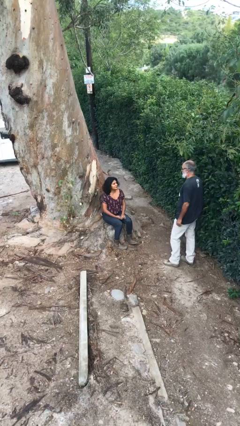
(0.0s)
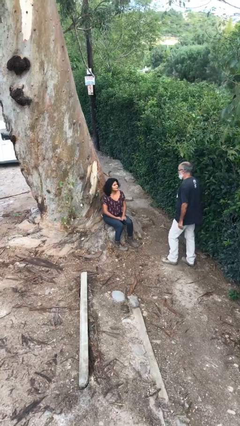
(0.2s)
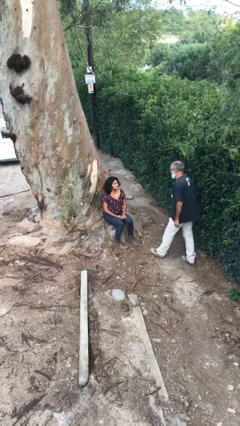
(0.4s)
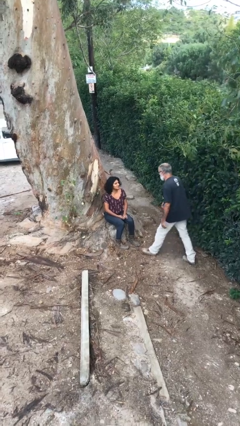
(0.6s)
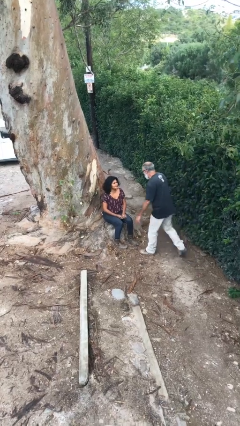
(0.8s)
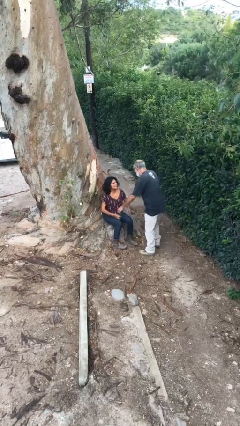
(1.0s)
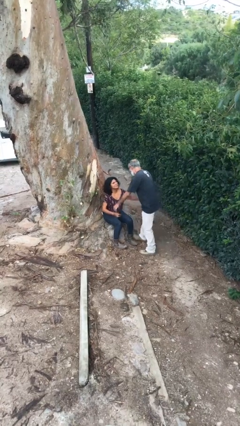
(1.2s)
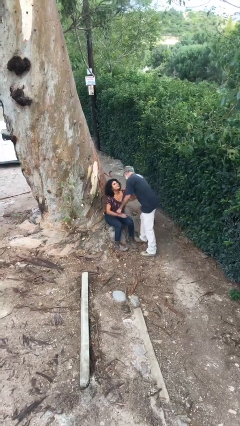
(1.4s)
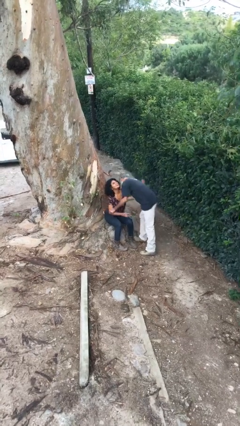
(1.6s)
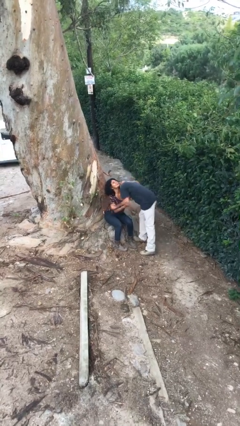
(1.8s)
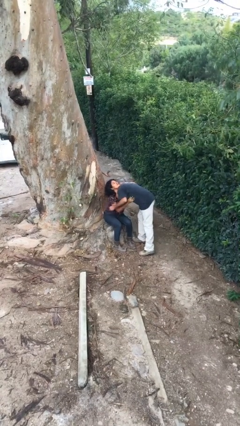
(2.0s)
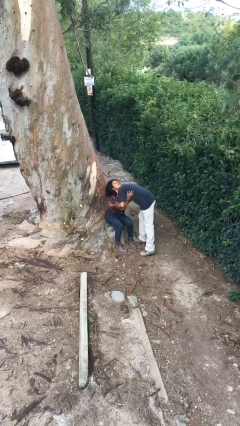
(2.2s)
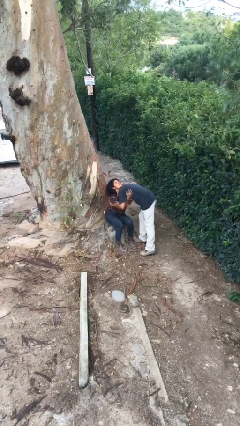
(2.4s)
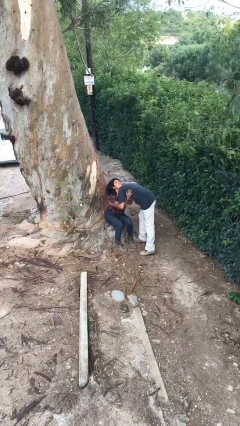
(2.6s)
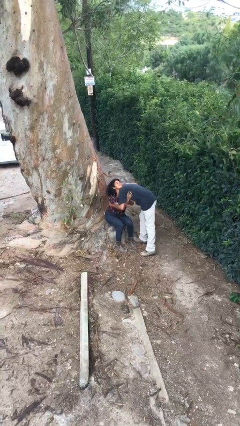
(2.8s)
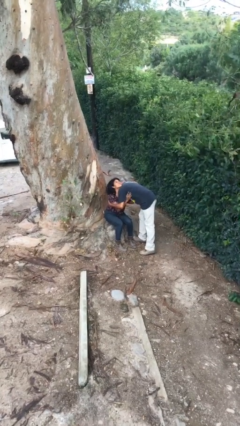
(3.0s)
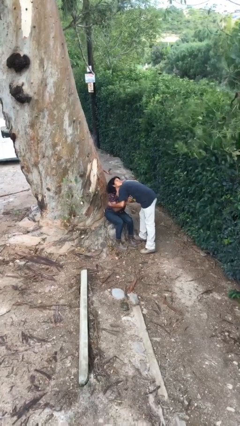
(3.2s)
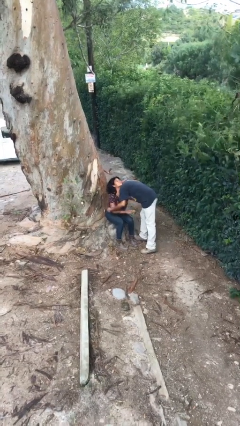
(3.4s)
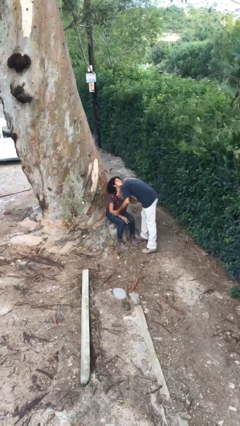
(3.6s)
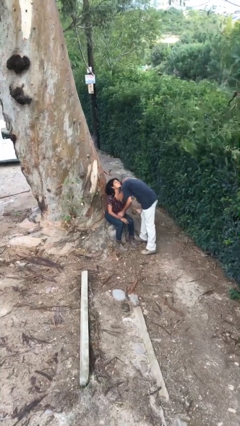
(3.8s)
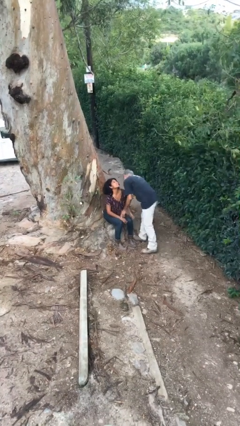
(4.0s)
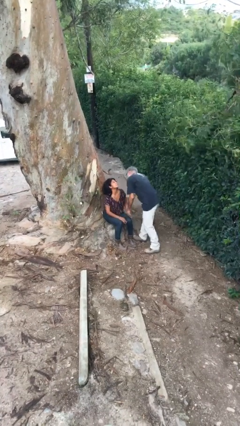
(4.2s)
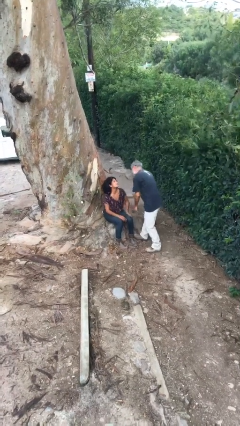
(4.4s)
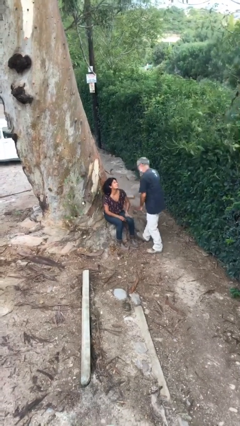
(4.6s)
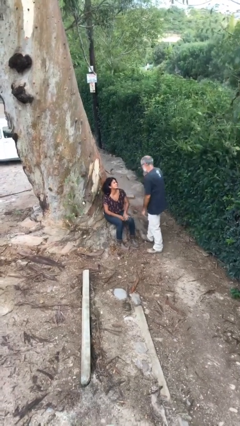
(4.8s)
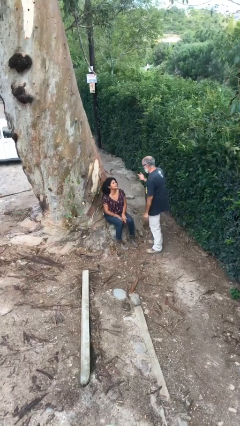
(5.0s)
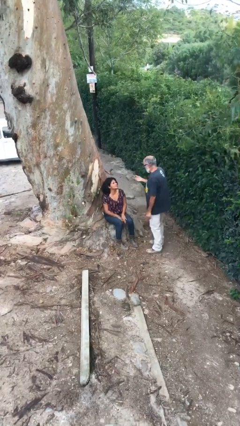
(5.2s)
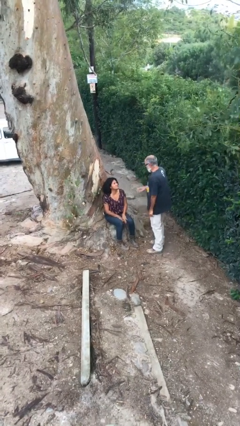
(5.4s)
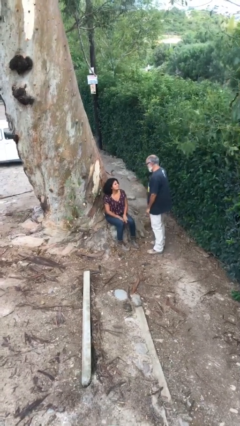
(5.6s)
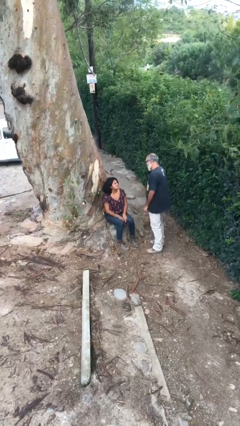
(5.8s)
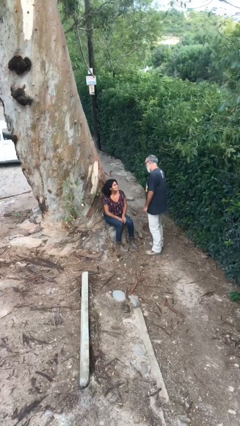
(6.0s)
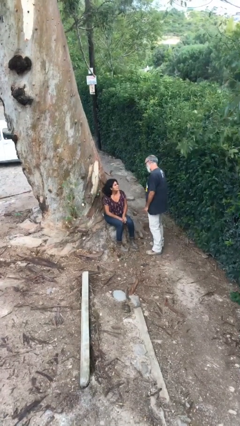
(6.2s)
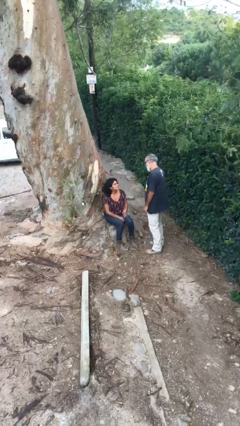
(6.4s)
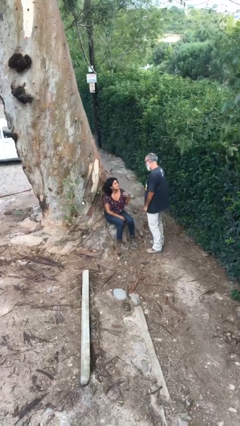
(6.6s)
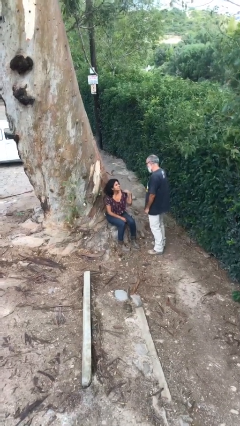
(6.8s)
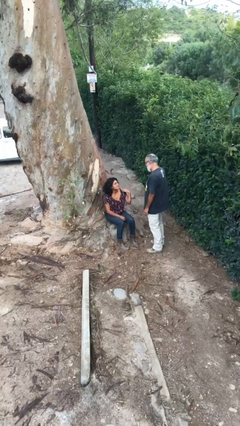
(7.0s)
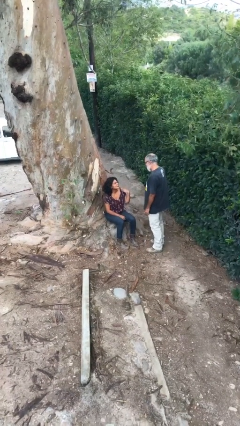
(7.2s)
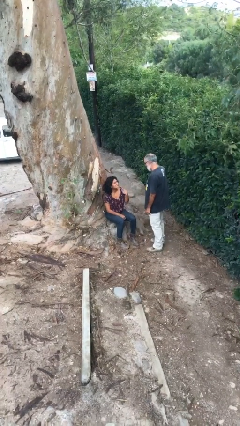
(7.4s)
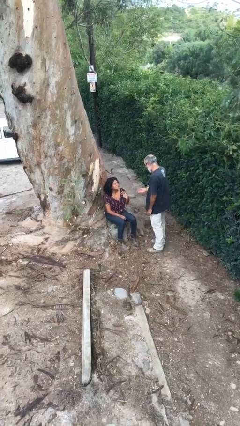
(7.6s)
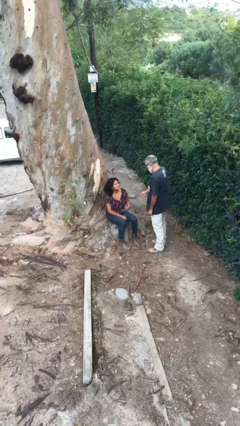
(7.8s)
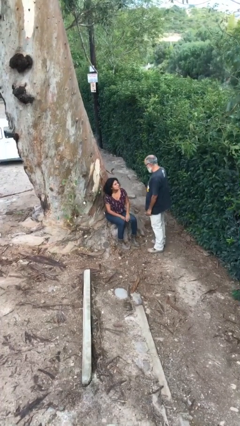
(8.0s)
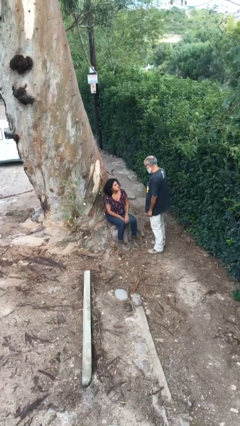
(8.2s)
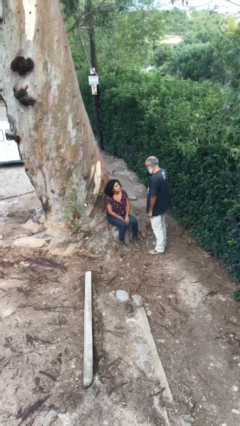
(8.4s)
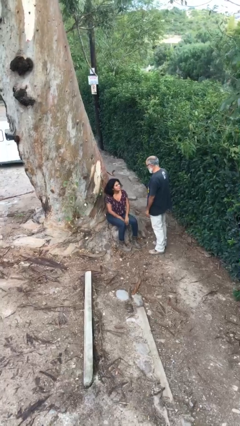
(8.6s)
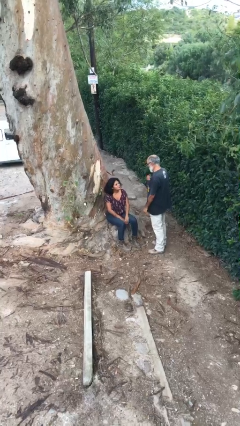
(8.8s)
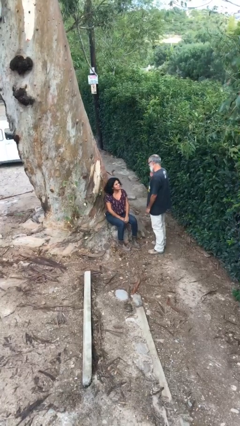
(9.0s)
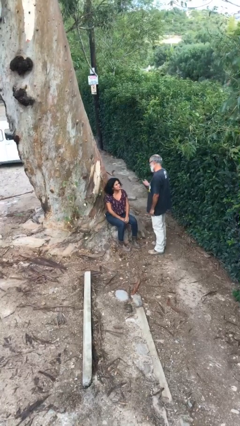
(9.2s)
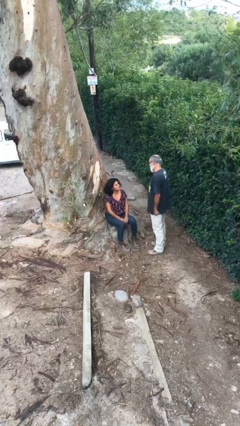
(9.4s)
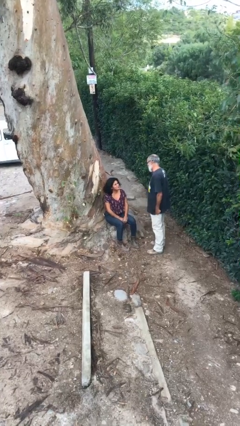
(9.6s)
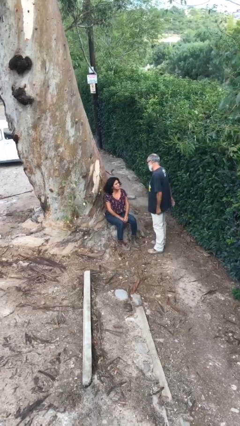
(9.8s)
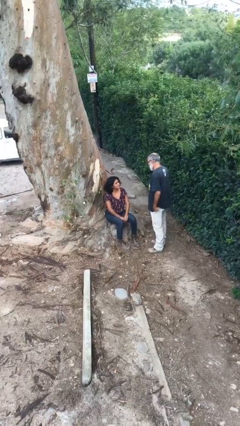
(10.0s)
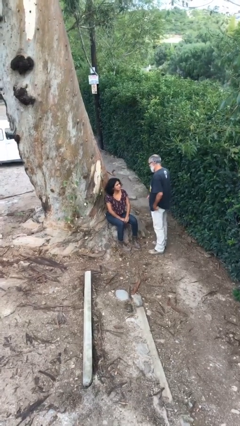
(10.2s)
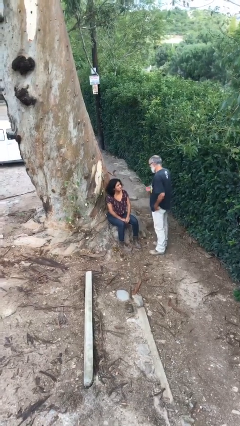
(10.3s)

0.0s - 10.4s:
person embraces person

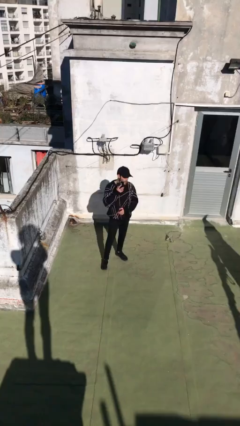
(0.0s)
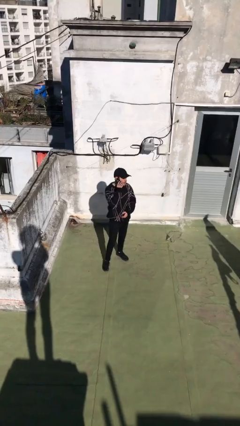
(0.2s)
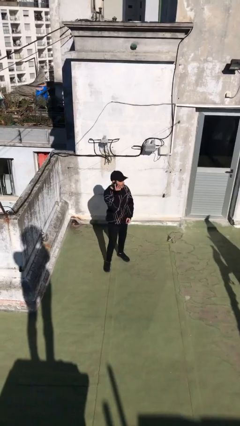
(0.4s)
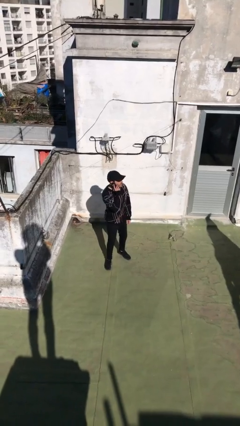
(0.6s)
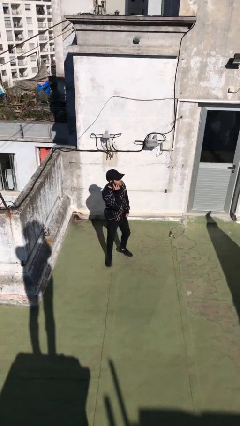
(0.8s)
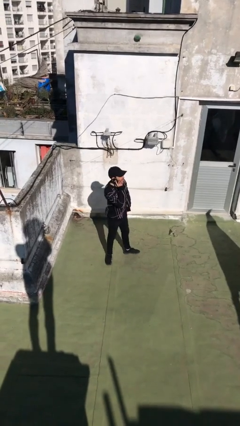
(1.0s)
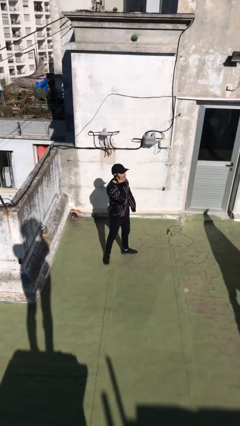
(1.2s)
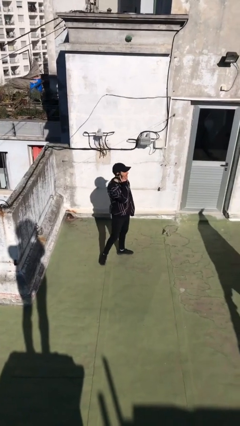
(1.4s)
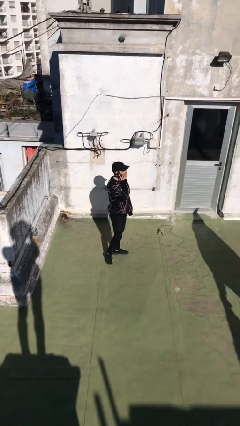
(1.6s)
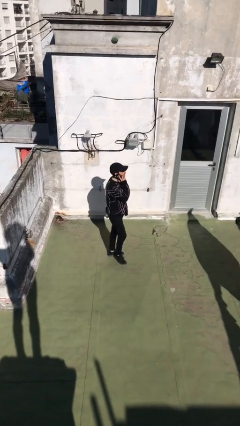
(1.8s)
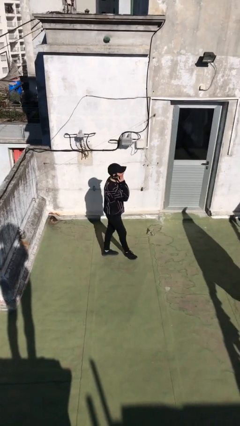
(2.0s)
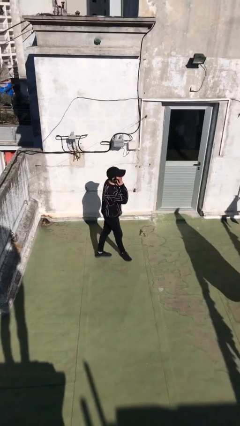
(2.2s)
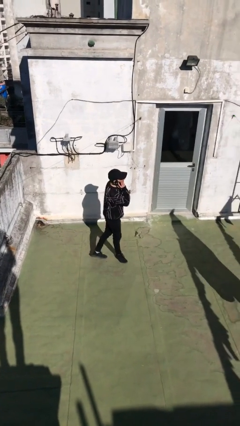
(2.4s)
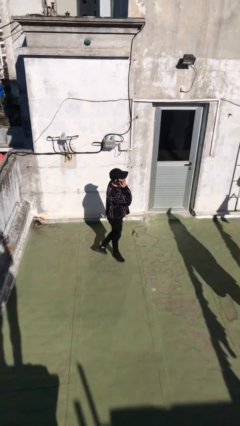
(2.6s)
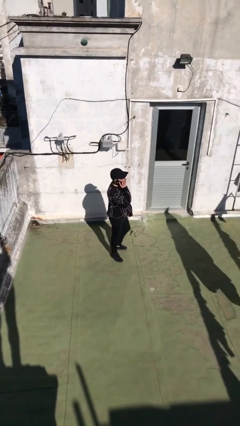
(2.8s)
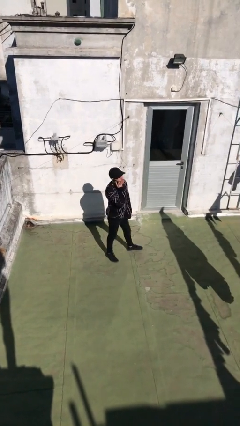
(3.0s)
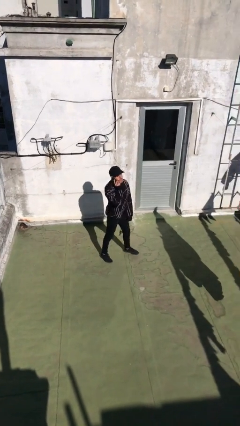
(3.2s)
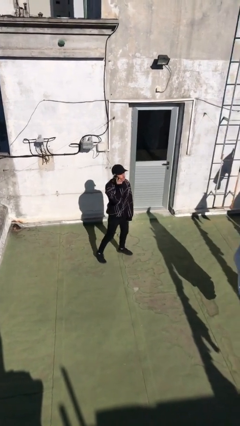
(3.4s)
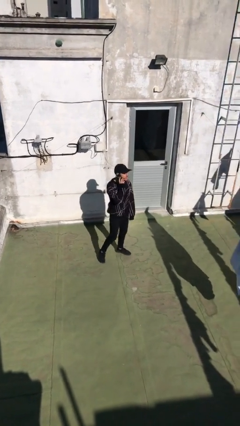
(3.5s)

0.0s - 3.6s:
person talks on phone

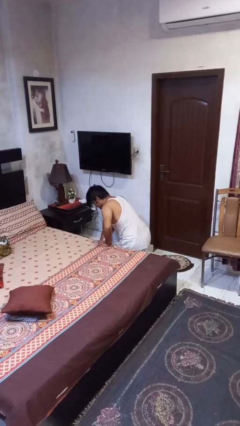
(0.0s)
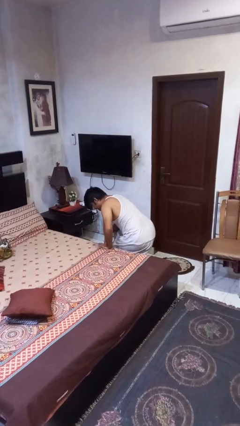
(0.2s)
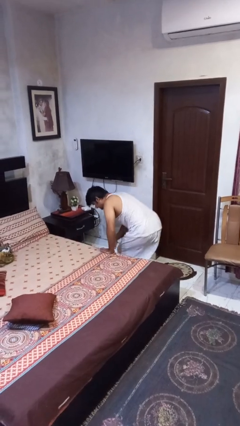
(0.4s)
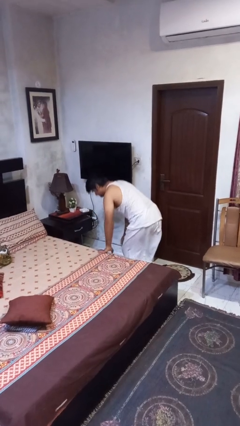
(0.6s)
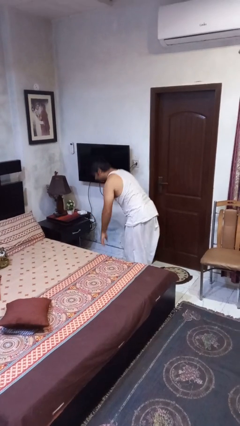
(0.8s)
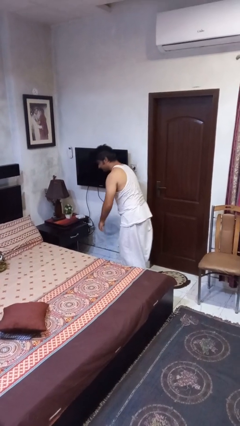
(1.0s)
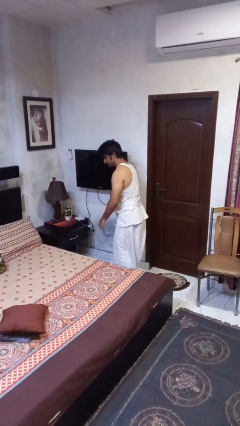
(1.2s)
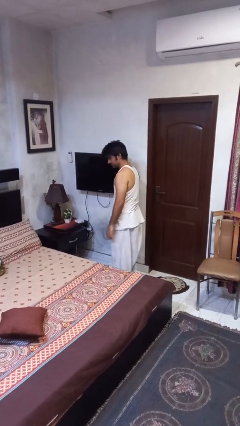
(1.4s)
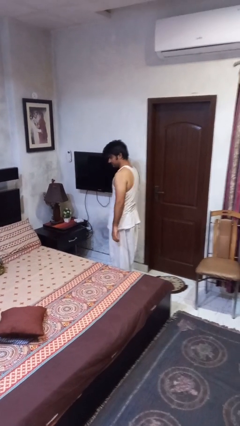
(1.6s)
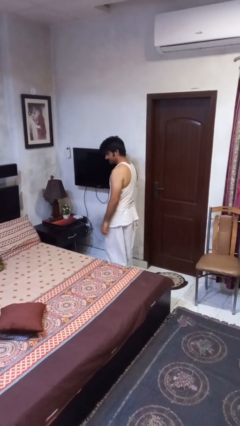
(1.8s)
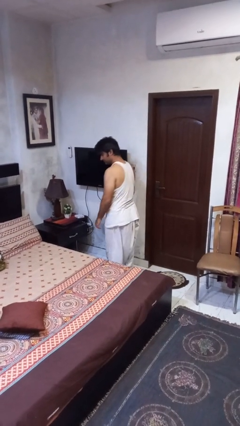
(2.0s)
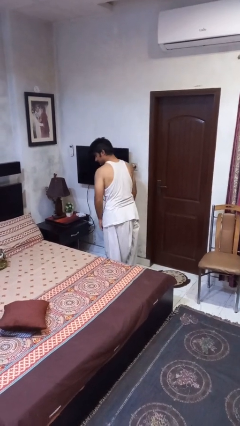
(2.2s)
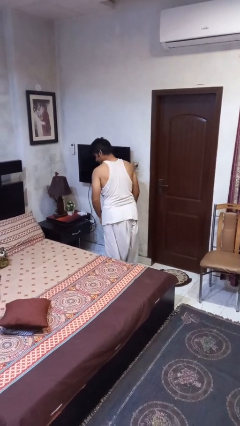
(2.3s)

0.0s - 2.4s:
person stands up from floor

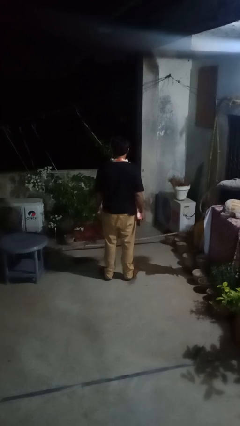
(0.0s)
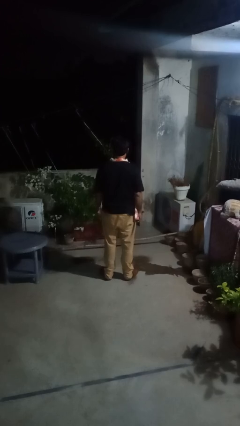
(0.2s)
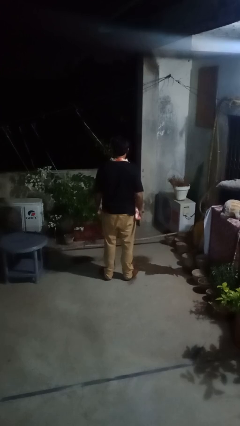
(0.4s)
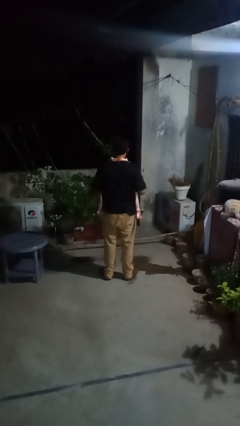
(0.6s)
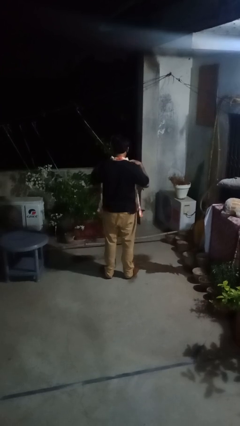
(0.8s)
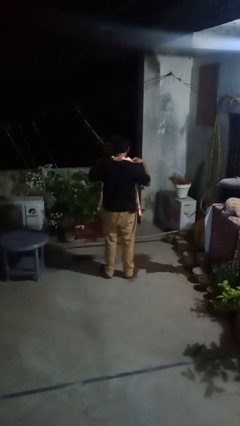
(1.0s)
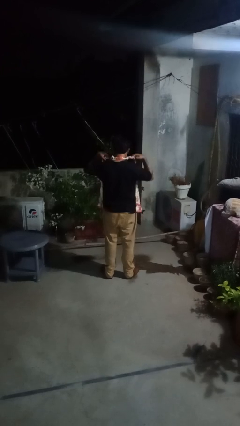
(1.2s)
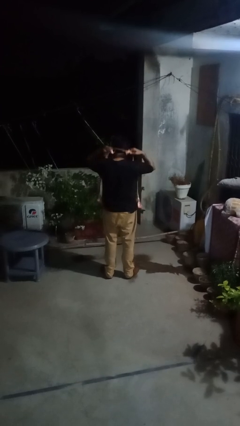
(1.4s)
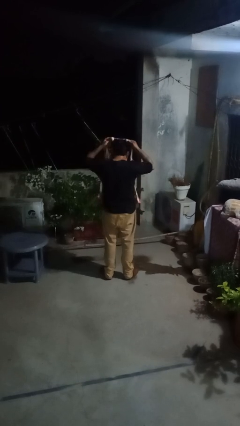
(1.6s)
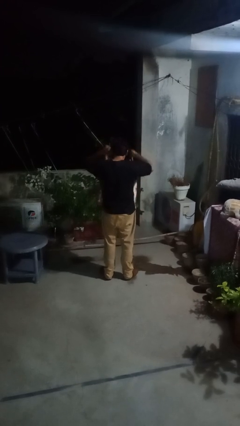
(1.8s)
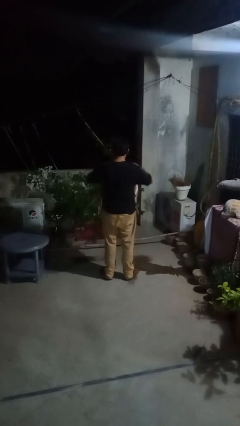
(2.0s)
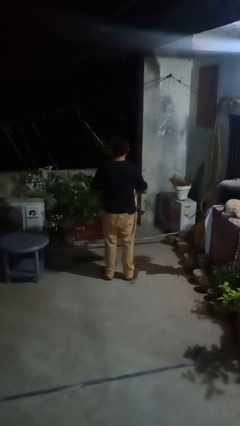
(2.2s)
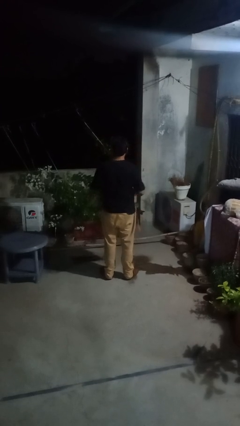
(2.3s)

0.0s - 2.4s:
person takes off apron
